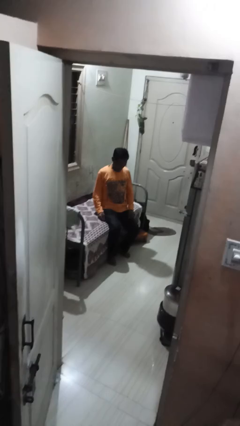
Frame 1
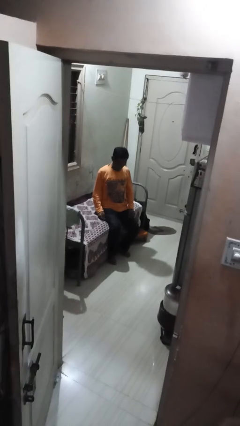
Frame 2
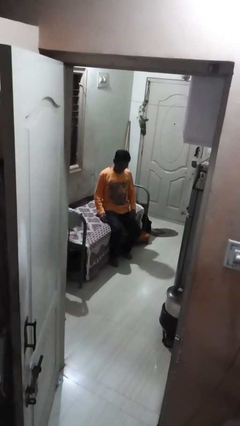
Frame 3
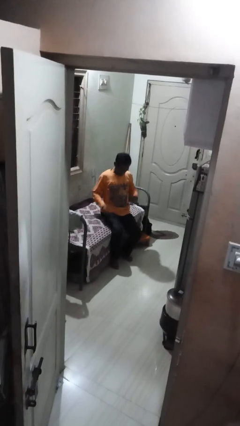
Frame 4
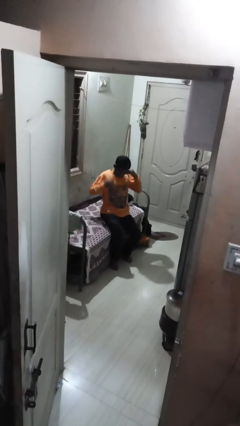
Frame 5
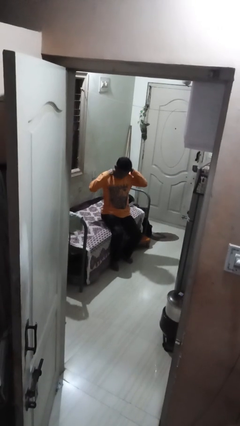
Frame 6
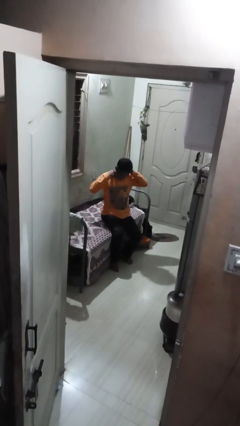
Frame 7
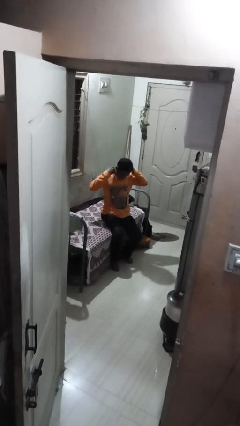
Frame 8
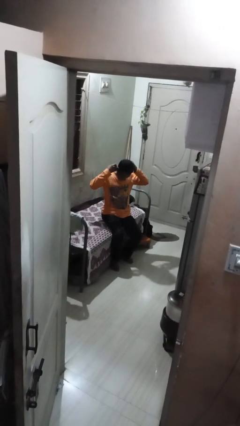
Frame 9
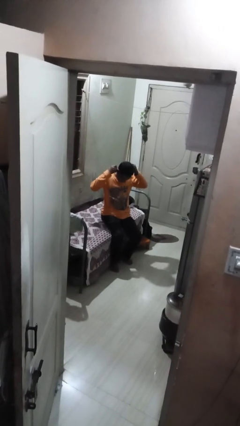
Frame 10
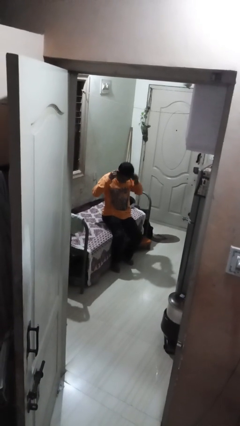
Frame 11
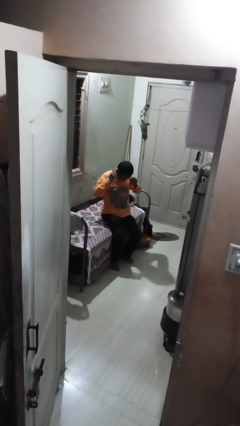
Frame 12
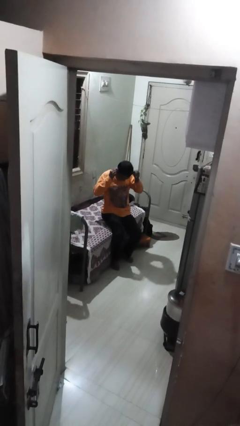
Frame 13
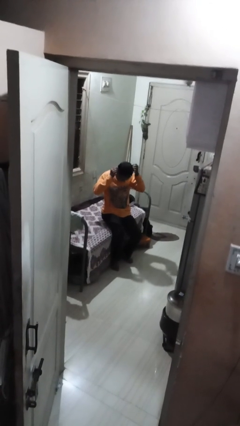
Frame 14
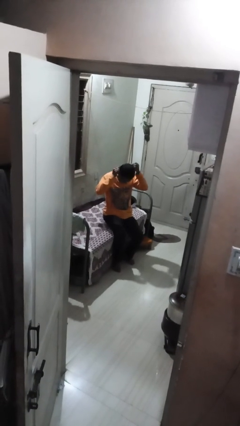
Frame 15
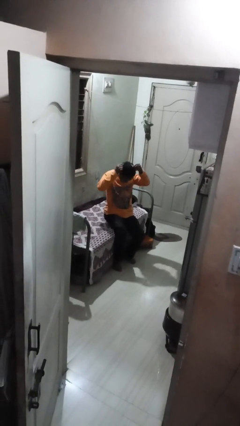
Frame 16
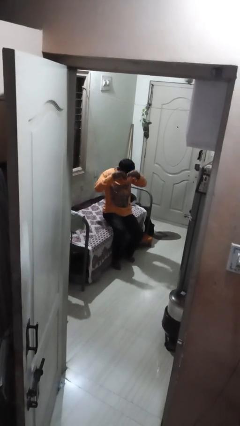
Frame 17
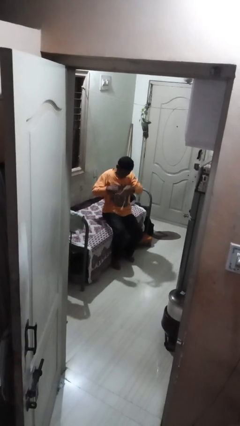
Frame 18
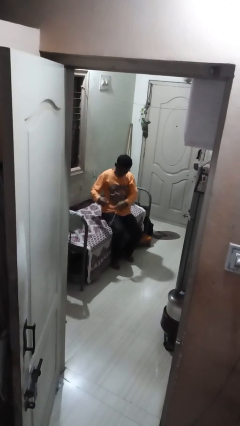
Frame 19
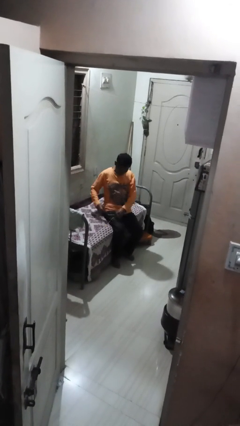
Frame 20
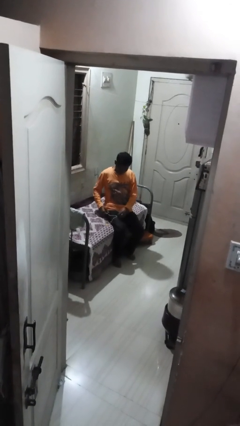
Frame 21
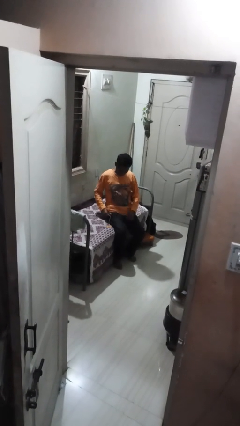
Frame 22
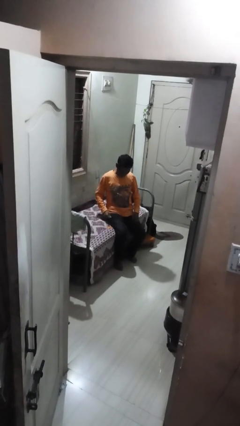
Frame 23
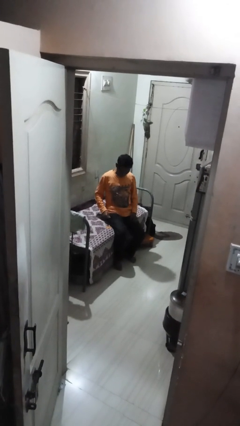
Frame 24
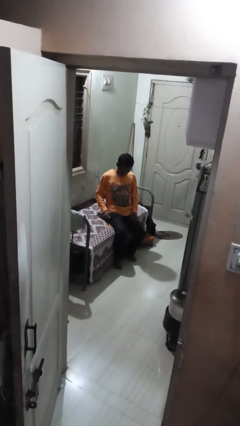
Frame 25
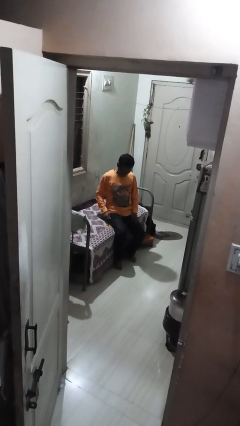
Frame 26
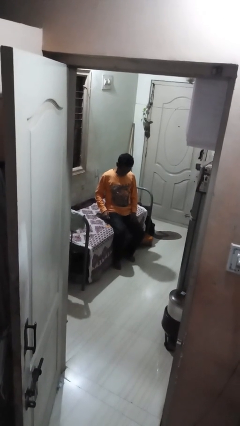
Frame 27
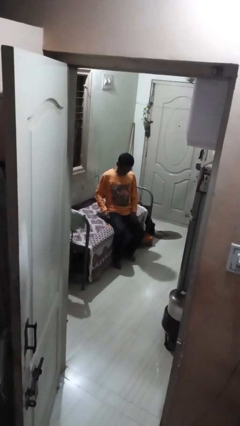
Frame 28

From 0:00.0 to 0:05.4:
person takes off necklace

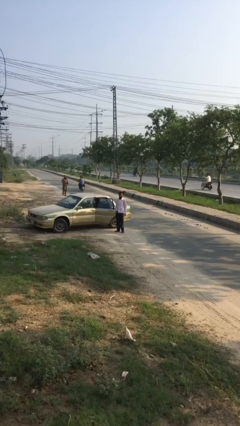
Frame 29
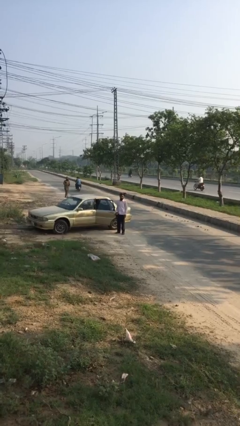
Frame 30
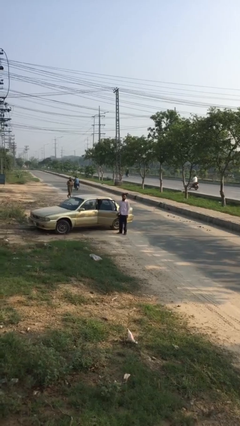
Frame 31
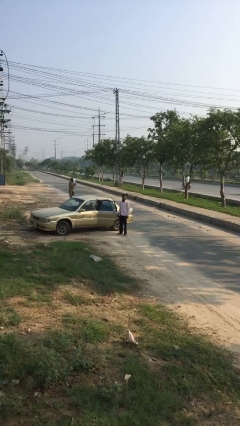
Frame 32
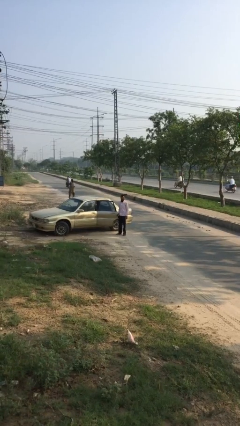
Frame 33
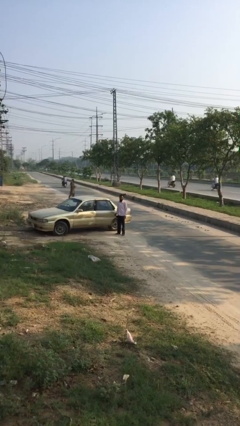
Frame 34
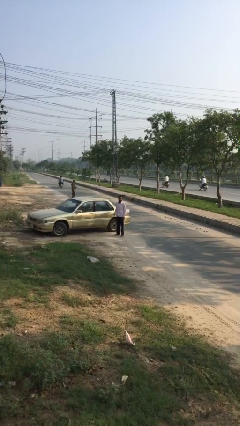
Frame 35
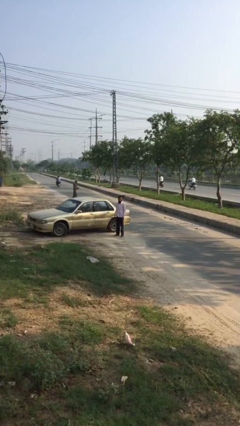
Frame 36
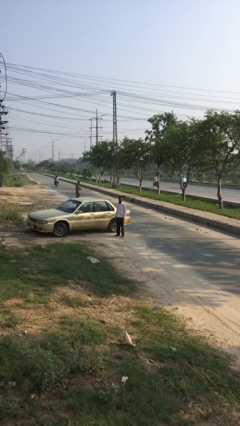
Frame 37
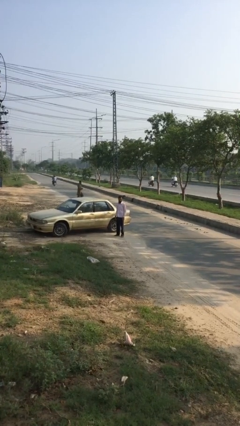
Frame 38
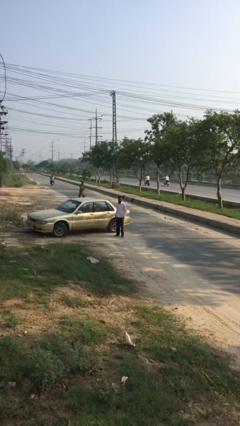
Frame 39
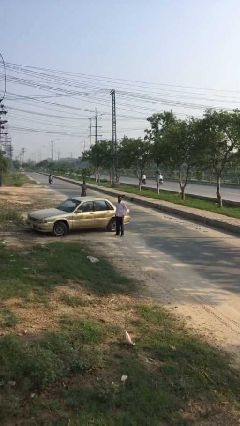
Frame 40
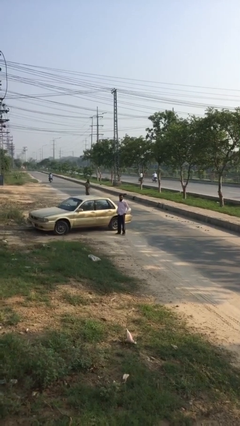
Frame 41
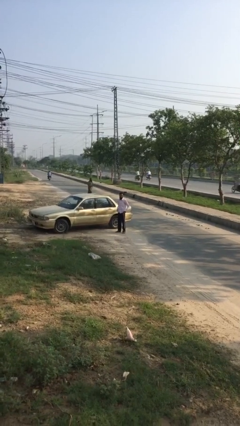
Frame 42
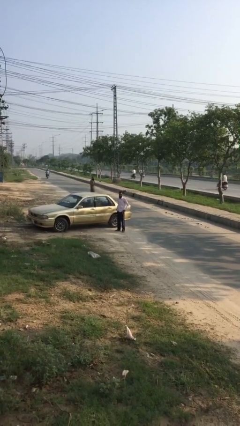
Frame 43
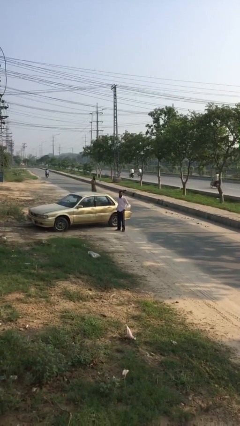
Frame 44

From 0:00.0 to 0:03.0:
person closes car door

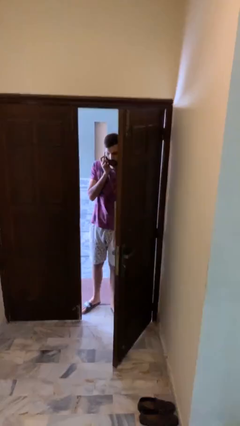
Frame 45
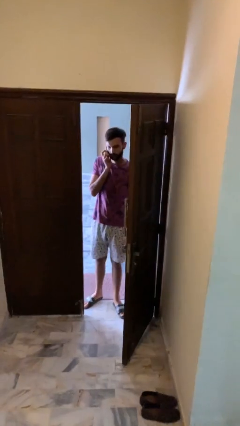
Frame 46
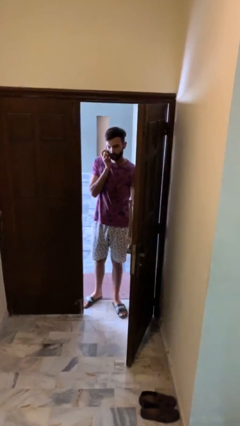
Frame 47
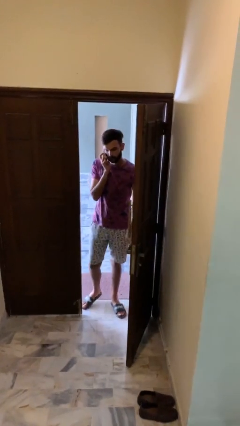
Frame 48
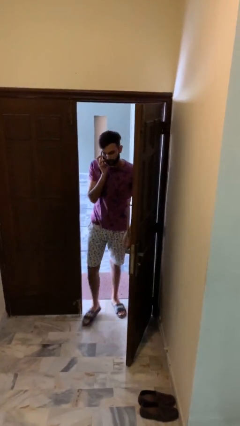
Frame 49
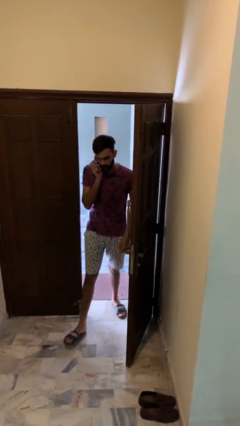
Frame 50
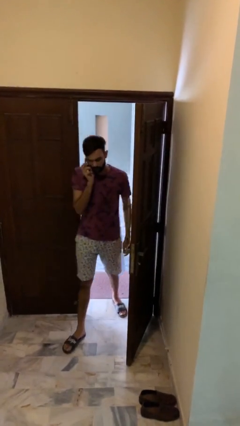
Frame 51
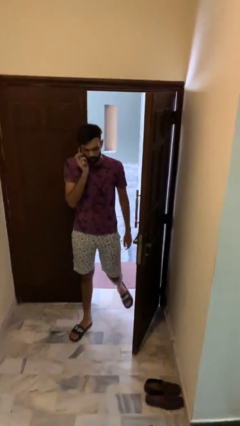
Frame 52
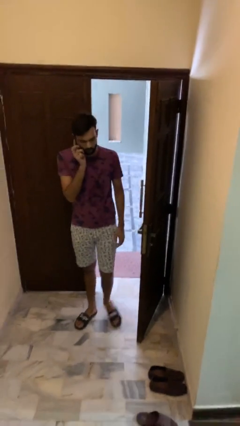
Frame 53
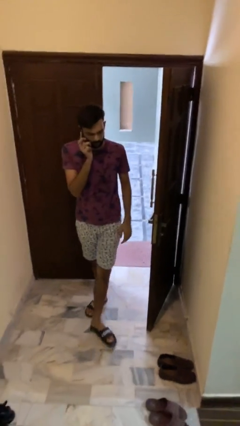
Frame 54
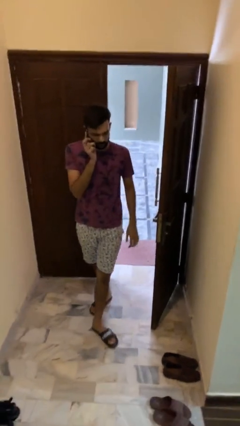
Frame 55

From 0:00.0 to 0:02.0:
person enters scene through structure

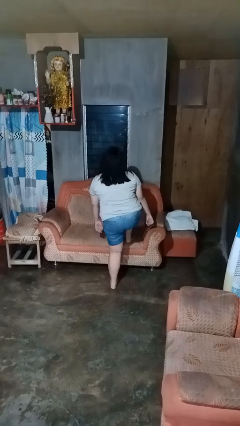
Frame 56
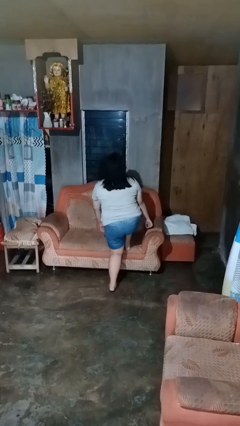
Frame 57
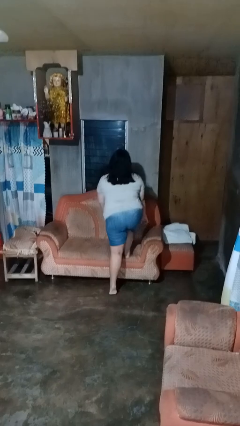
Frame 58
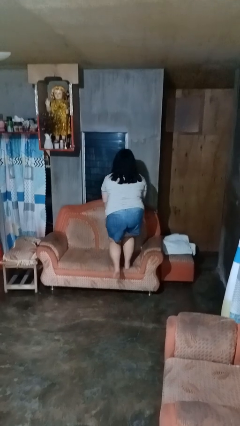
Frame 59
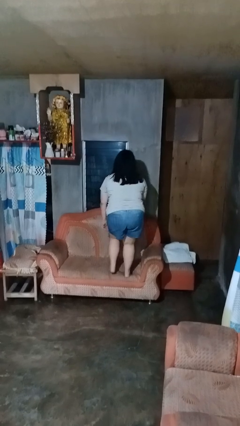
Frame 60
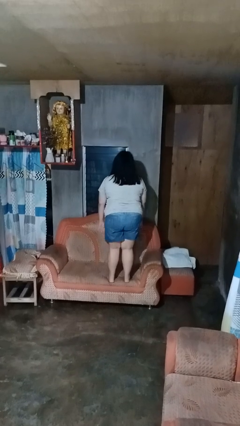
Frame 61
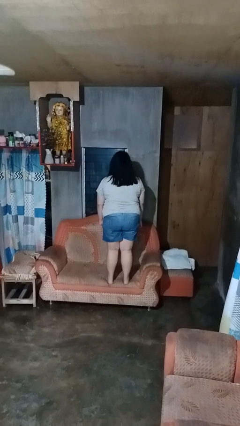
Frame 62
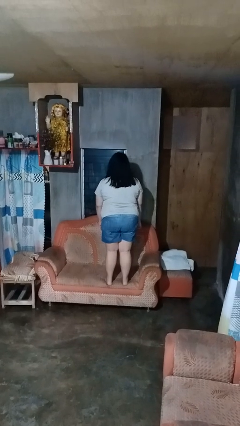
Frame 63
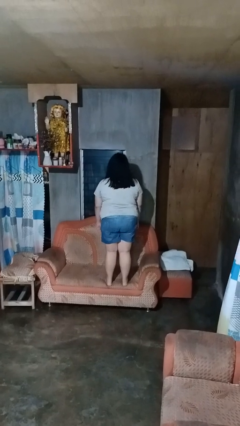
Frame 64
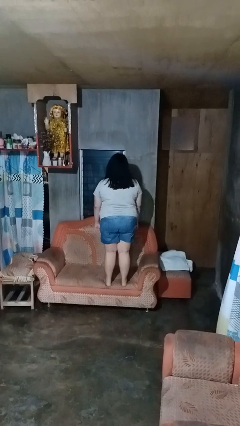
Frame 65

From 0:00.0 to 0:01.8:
person climbs on couch

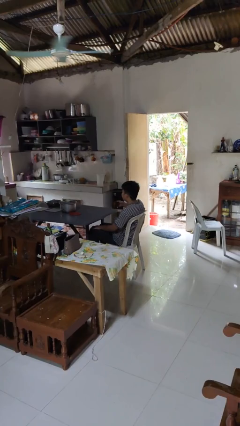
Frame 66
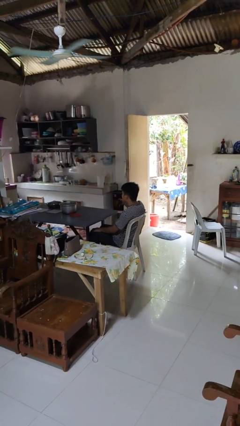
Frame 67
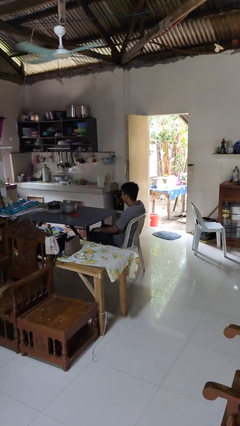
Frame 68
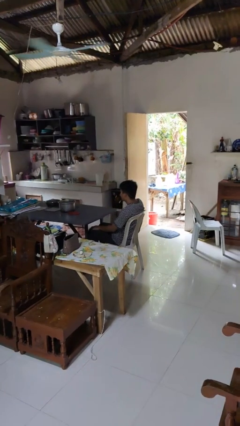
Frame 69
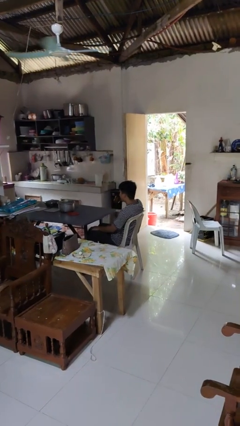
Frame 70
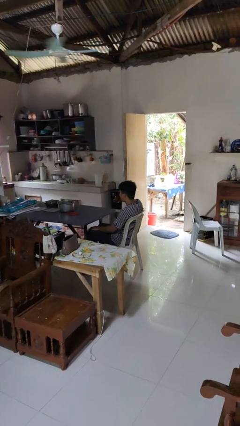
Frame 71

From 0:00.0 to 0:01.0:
person drinks from mug

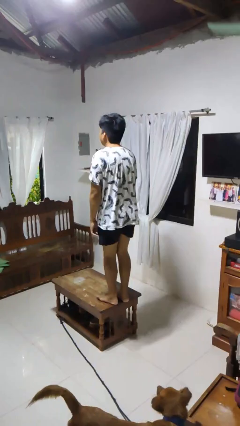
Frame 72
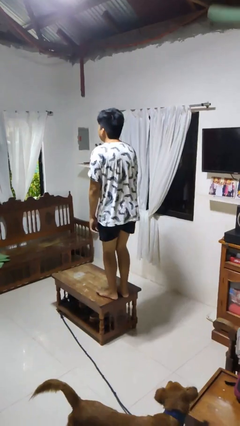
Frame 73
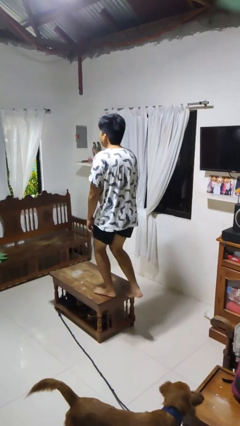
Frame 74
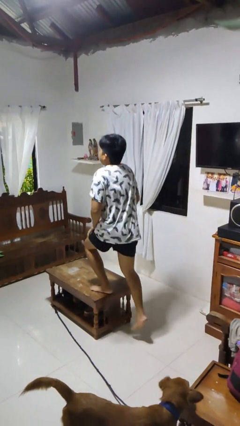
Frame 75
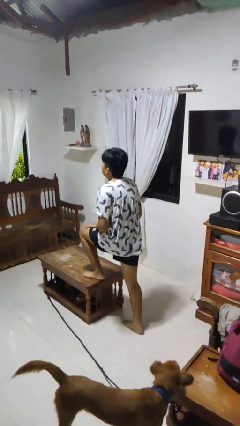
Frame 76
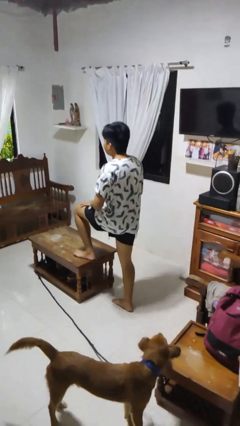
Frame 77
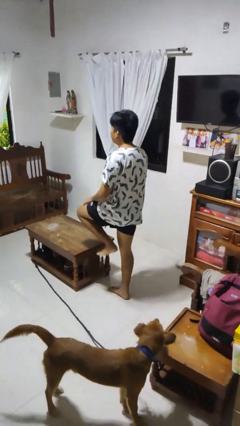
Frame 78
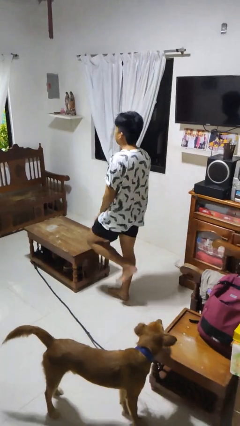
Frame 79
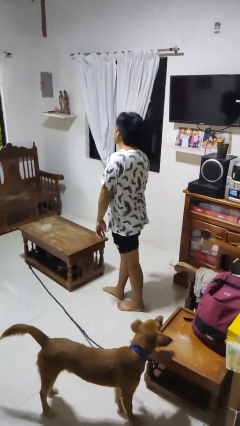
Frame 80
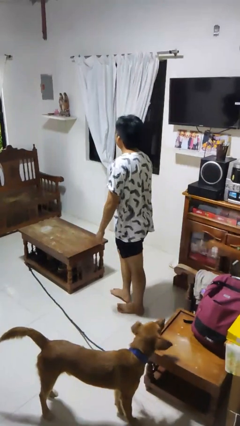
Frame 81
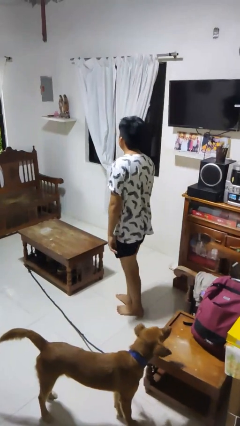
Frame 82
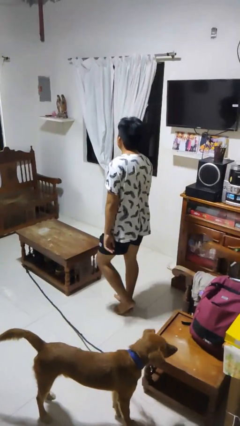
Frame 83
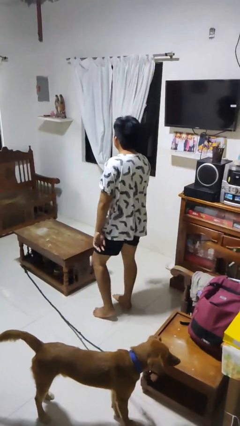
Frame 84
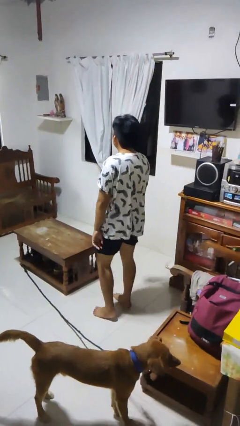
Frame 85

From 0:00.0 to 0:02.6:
person climbs off table

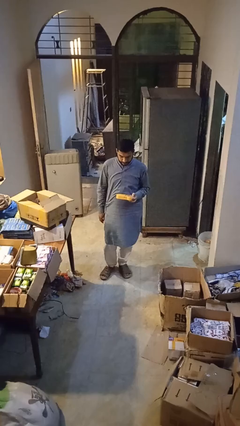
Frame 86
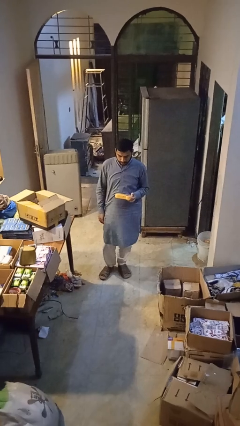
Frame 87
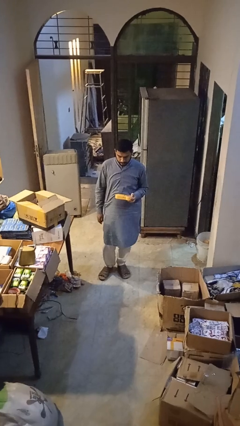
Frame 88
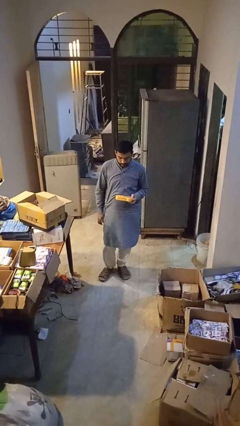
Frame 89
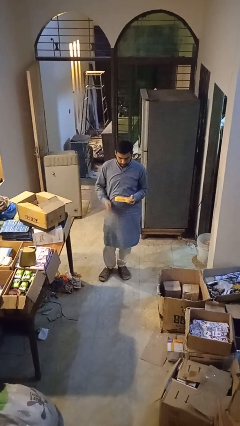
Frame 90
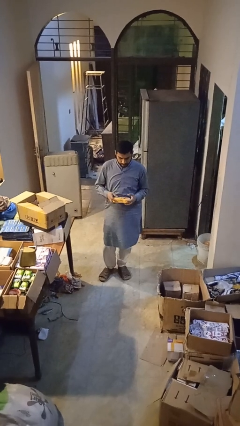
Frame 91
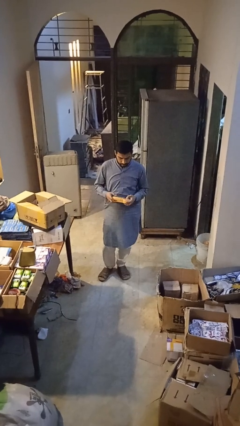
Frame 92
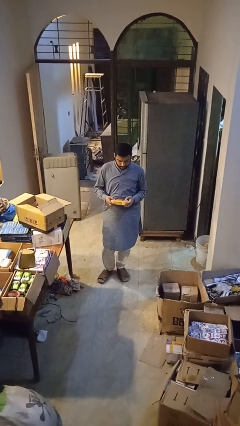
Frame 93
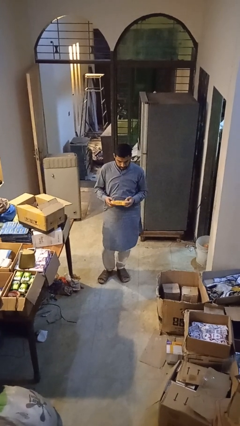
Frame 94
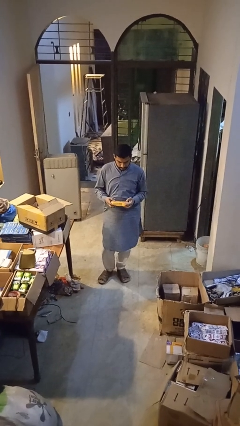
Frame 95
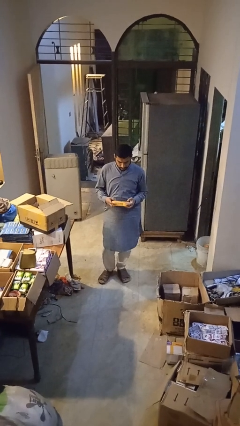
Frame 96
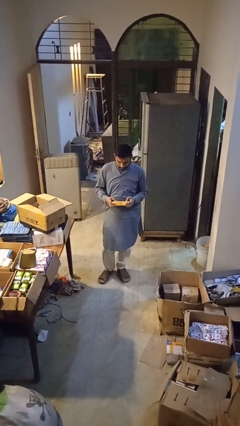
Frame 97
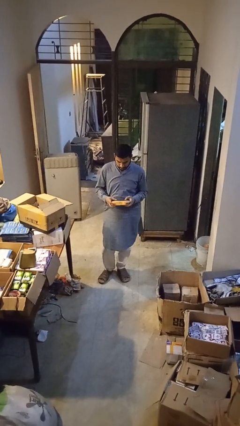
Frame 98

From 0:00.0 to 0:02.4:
person interacts with handheld game
